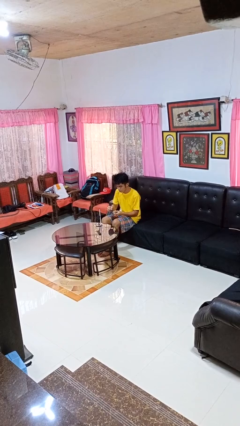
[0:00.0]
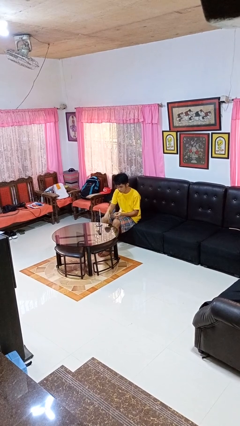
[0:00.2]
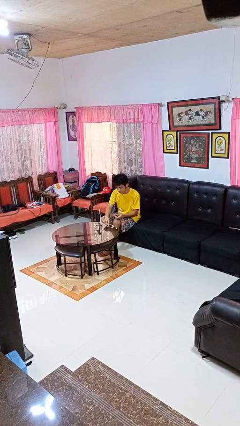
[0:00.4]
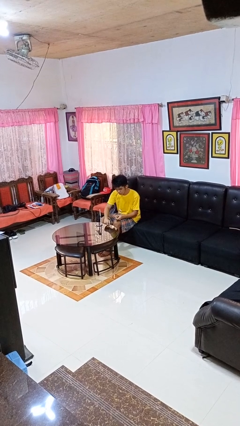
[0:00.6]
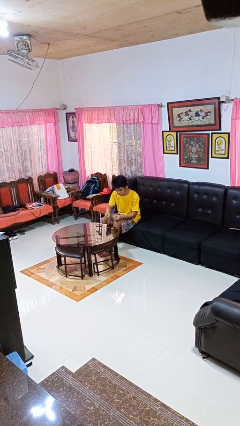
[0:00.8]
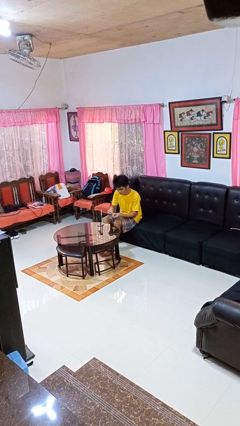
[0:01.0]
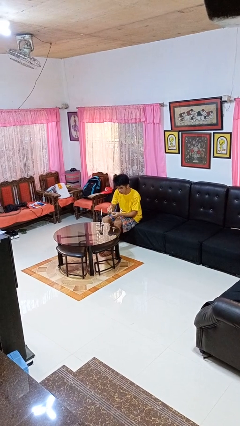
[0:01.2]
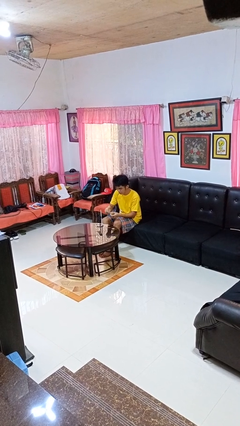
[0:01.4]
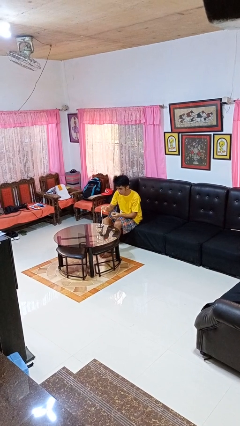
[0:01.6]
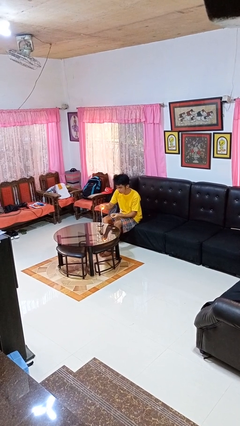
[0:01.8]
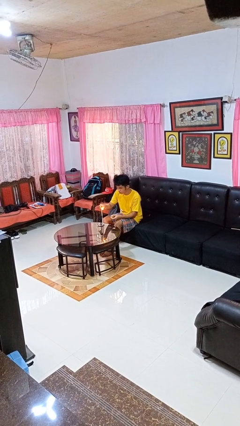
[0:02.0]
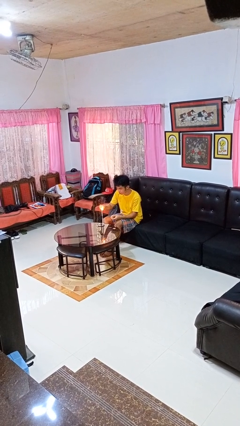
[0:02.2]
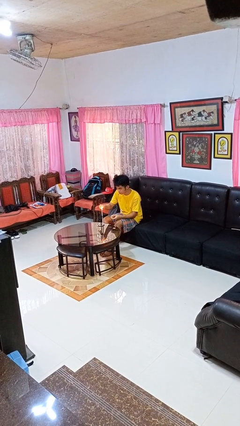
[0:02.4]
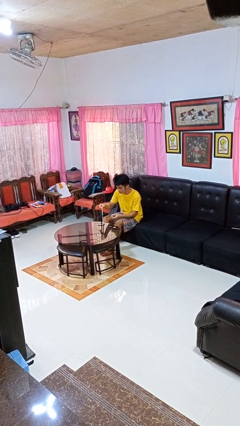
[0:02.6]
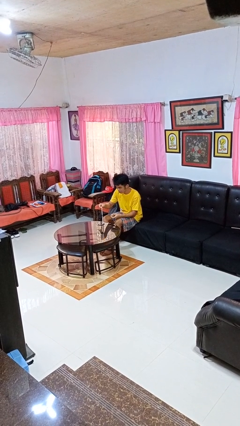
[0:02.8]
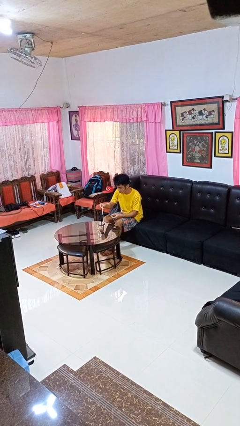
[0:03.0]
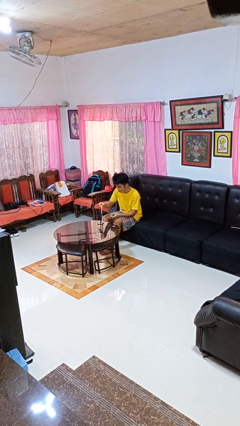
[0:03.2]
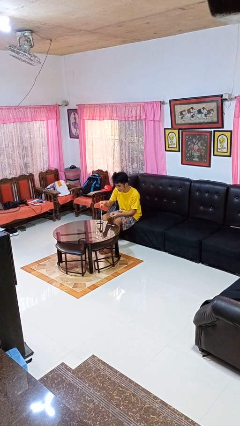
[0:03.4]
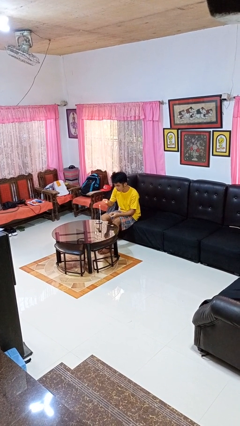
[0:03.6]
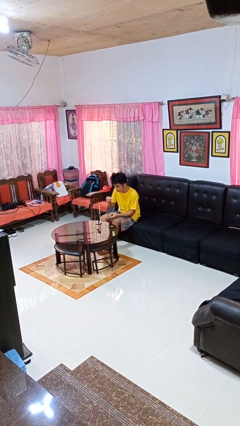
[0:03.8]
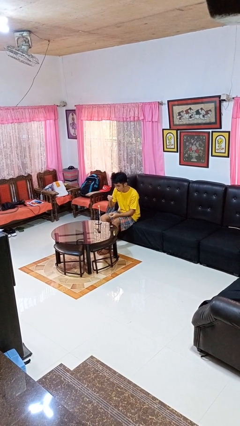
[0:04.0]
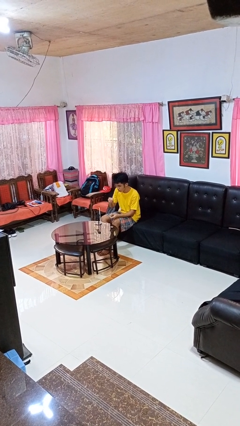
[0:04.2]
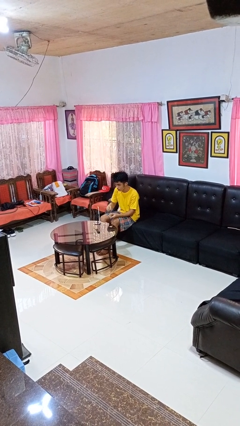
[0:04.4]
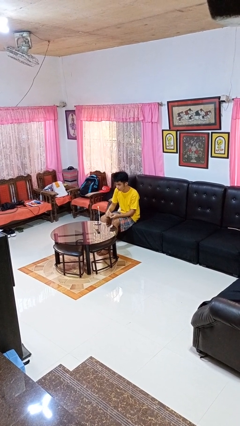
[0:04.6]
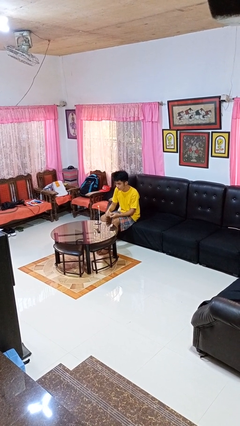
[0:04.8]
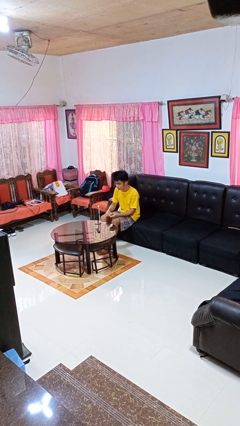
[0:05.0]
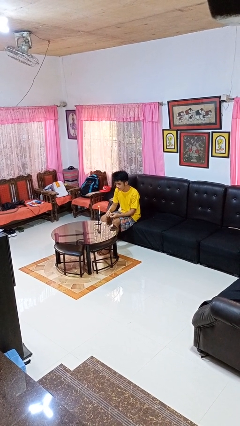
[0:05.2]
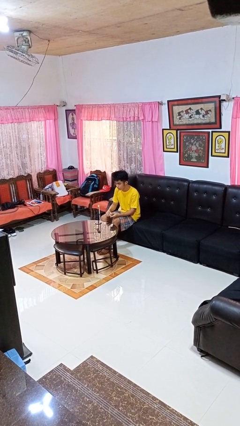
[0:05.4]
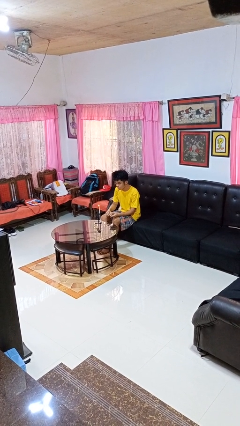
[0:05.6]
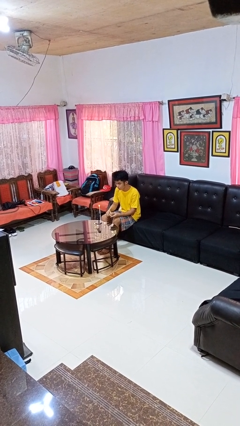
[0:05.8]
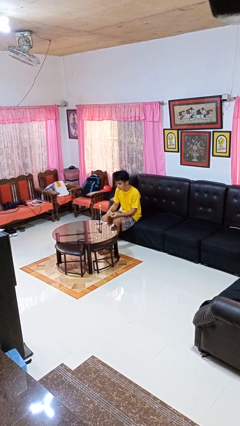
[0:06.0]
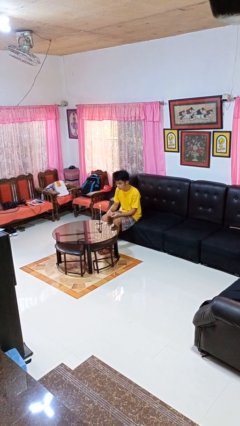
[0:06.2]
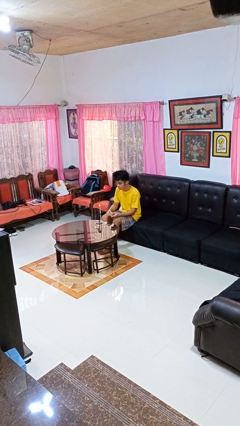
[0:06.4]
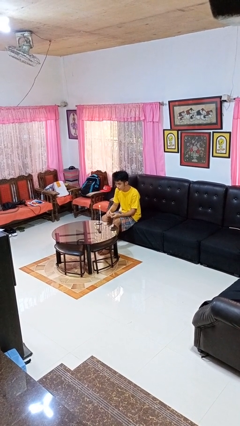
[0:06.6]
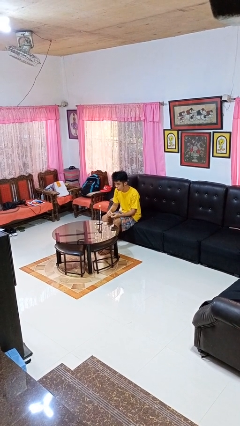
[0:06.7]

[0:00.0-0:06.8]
person lights candle

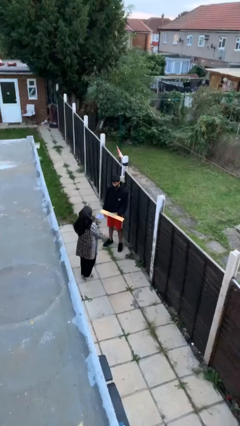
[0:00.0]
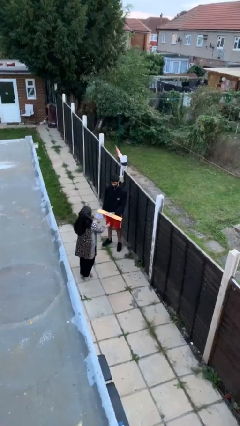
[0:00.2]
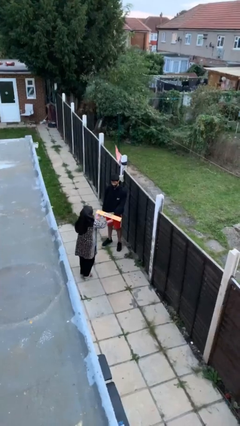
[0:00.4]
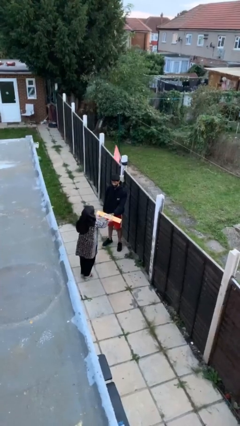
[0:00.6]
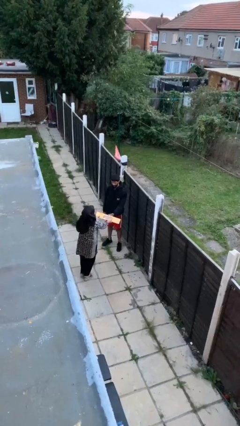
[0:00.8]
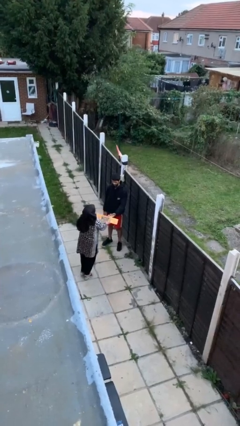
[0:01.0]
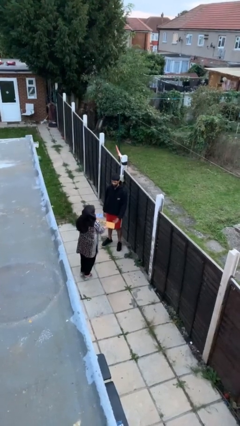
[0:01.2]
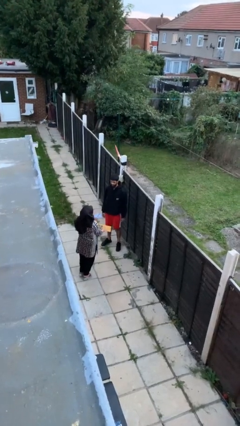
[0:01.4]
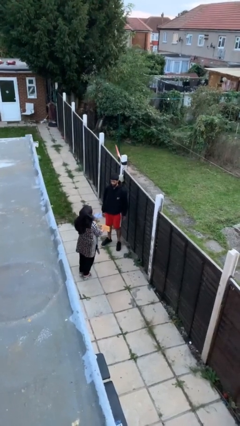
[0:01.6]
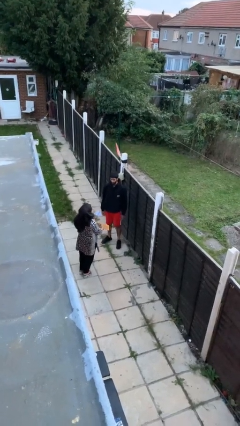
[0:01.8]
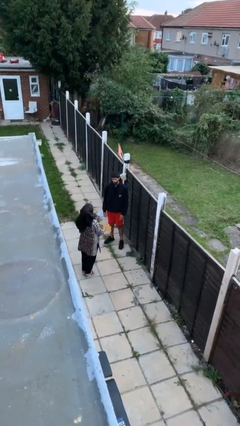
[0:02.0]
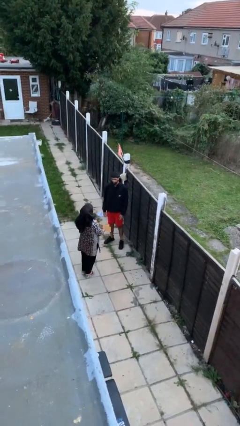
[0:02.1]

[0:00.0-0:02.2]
person transfers object to person

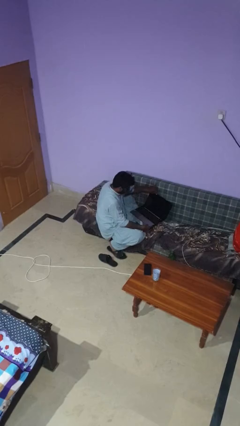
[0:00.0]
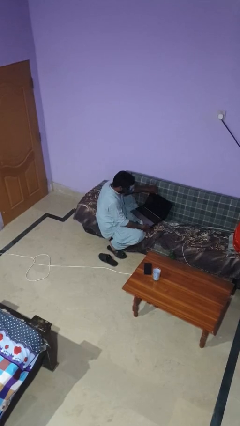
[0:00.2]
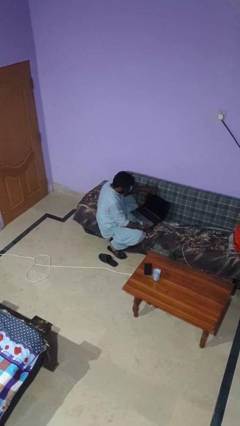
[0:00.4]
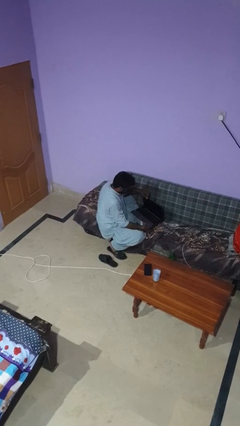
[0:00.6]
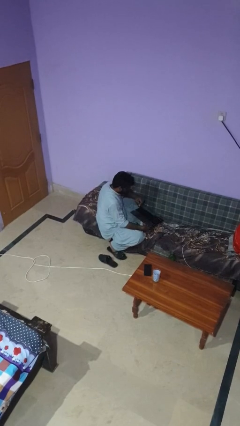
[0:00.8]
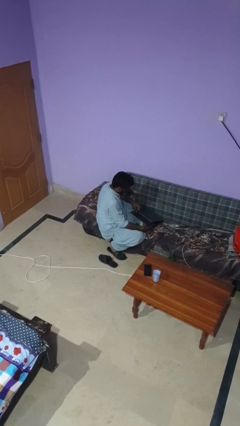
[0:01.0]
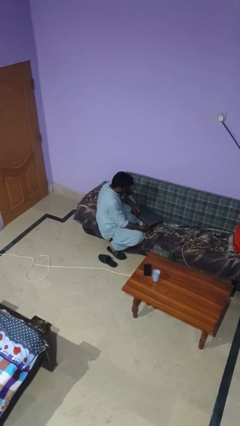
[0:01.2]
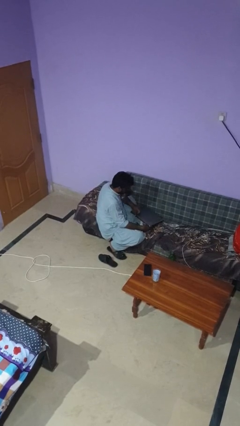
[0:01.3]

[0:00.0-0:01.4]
person closes laptop

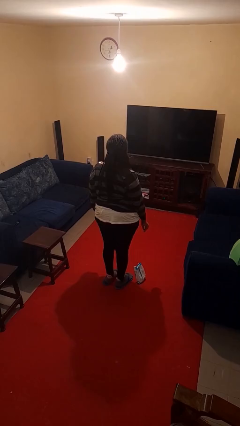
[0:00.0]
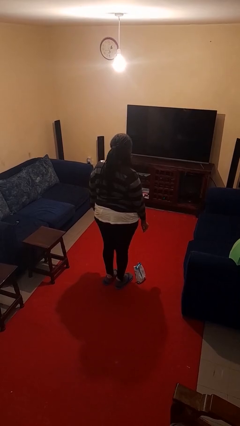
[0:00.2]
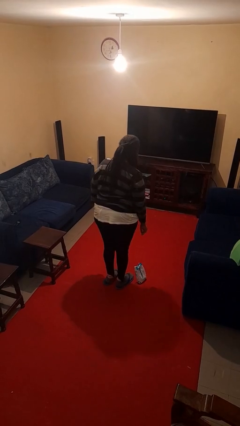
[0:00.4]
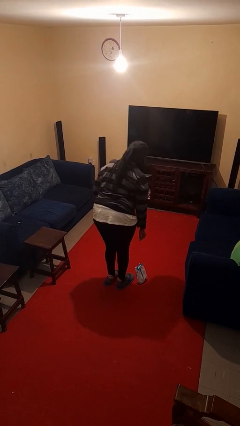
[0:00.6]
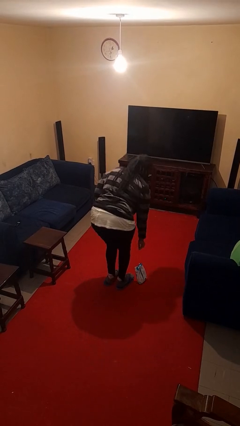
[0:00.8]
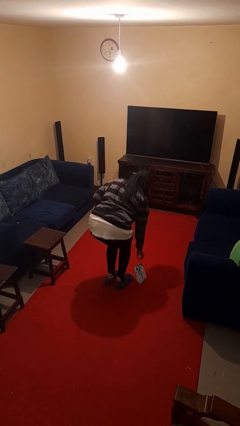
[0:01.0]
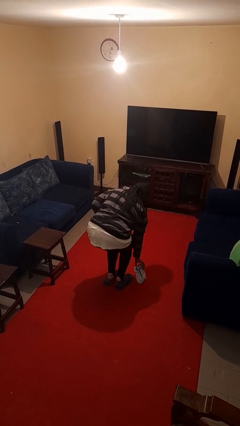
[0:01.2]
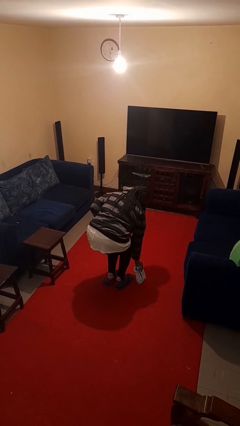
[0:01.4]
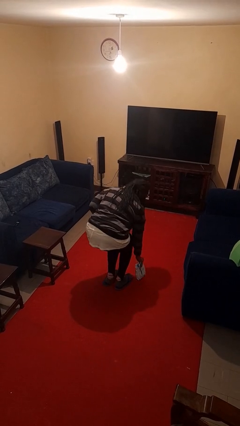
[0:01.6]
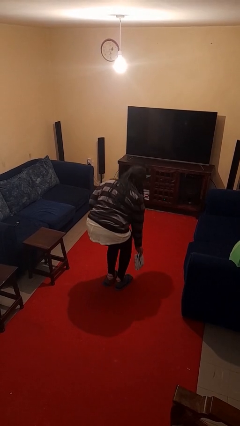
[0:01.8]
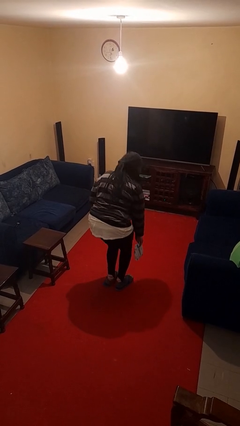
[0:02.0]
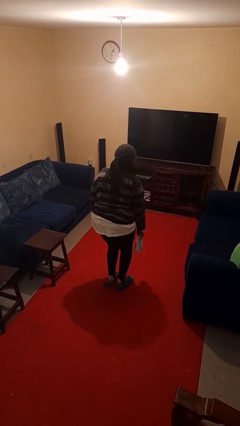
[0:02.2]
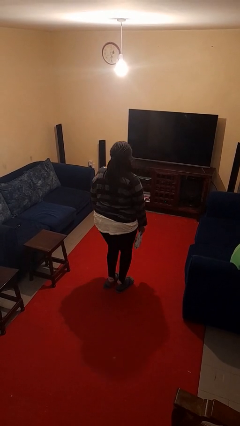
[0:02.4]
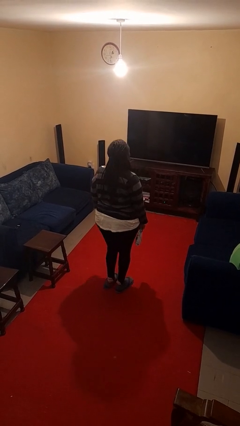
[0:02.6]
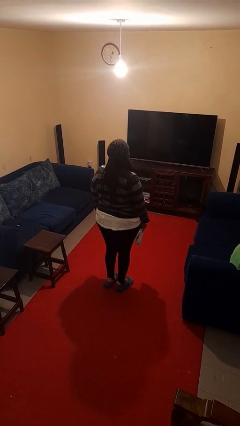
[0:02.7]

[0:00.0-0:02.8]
person picks up object from floor

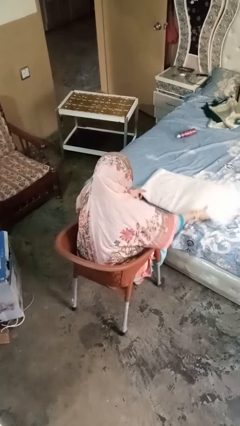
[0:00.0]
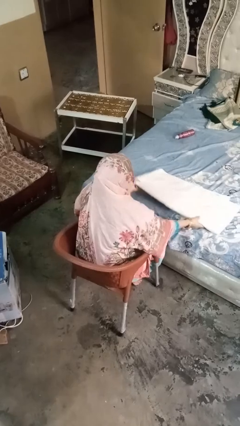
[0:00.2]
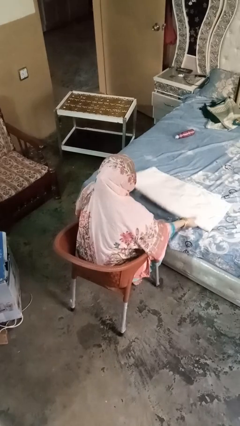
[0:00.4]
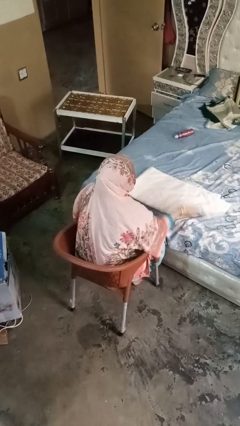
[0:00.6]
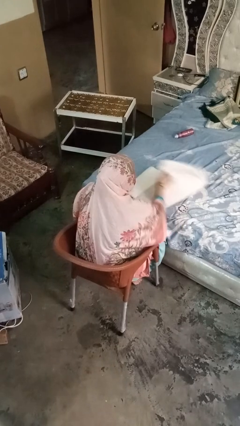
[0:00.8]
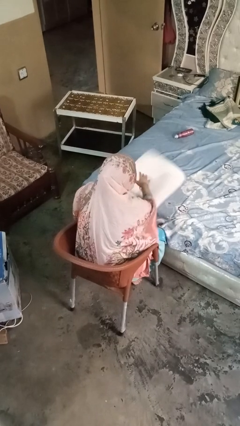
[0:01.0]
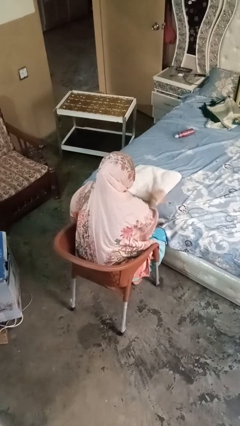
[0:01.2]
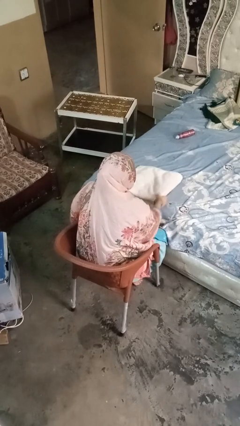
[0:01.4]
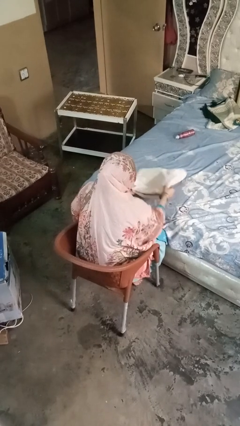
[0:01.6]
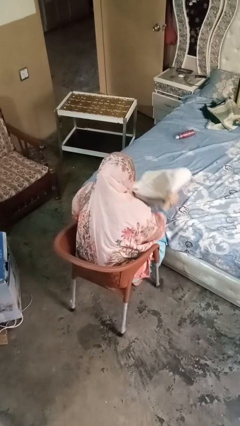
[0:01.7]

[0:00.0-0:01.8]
person folds towel

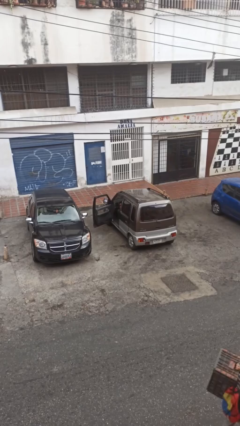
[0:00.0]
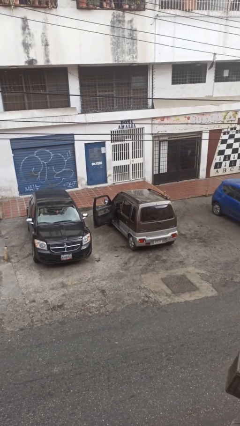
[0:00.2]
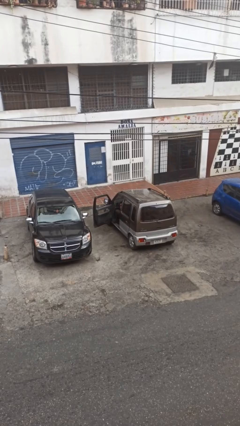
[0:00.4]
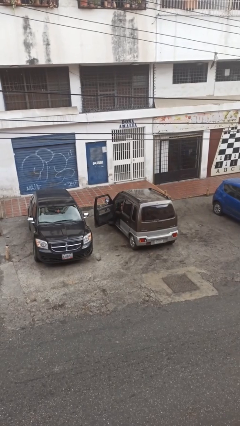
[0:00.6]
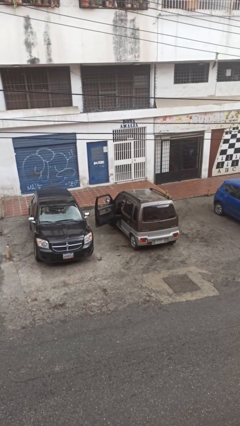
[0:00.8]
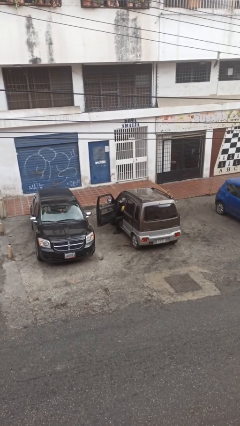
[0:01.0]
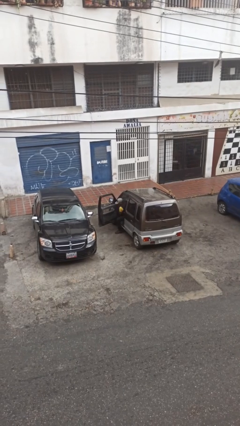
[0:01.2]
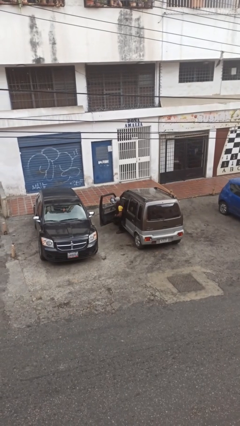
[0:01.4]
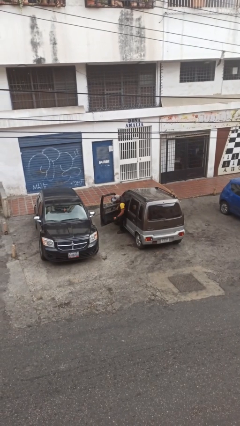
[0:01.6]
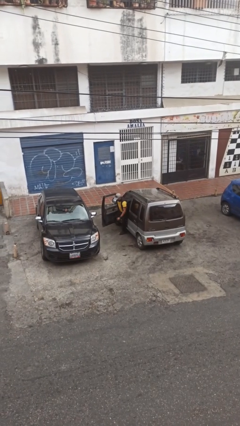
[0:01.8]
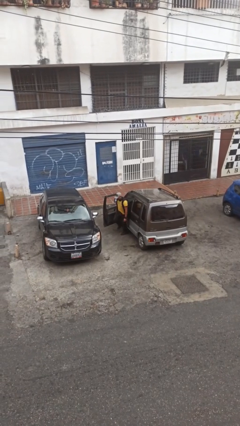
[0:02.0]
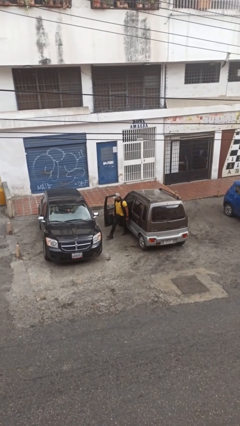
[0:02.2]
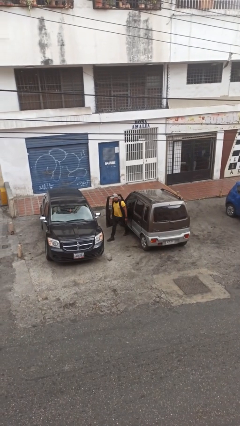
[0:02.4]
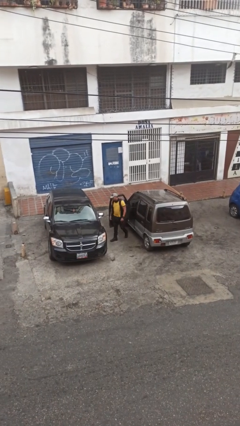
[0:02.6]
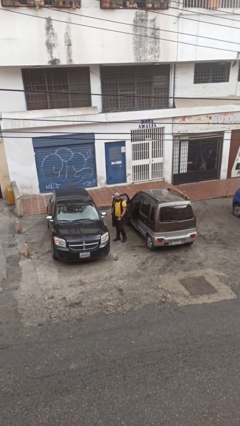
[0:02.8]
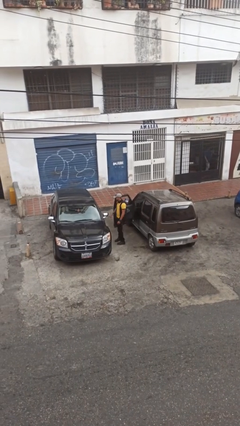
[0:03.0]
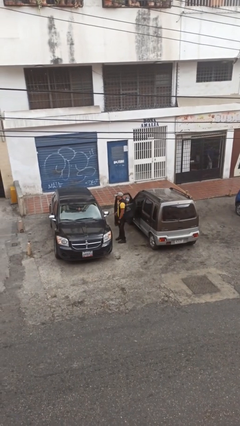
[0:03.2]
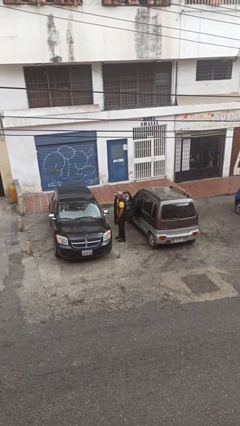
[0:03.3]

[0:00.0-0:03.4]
person exits car
